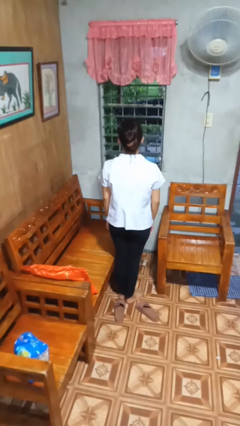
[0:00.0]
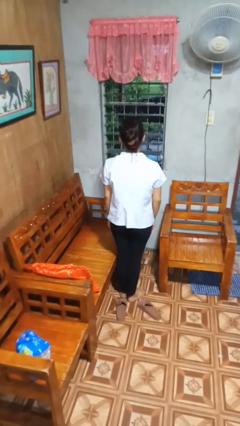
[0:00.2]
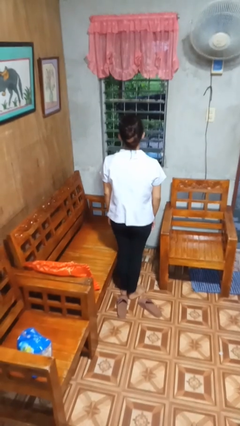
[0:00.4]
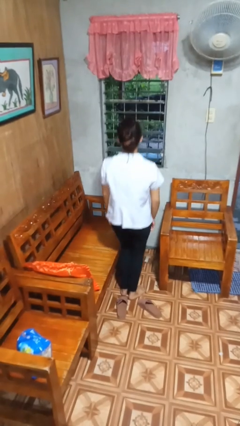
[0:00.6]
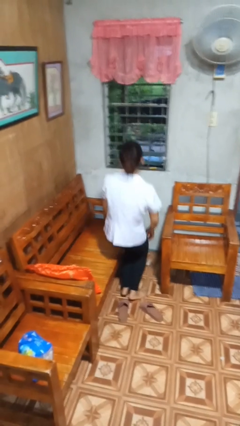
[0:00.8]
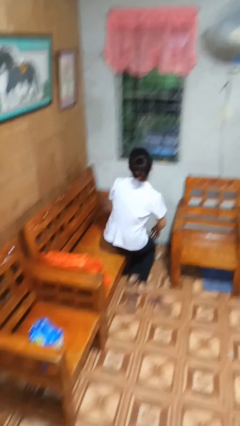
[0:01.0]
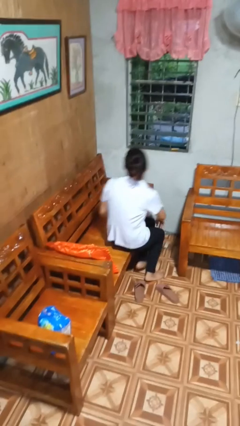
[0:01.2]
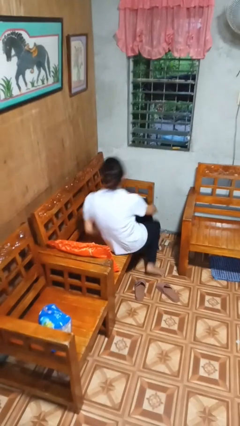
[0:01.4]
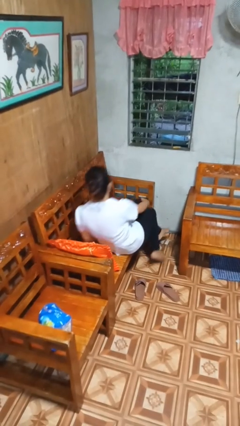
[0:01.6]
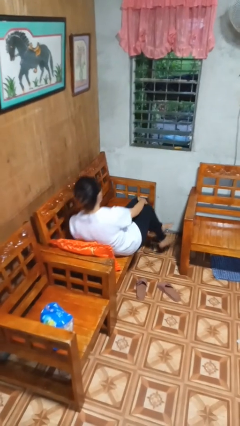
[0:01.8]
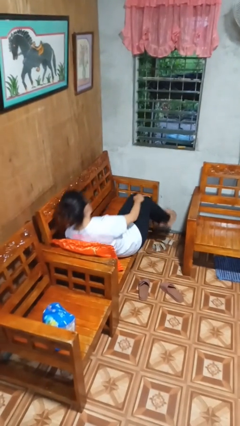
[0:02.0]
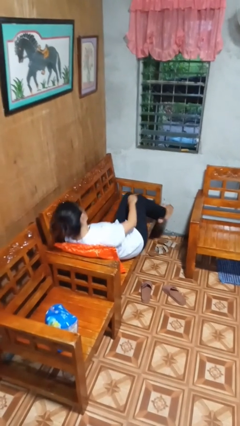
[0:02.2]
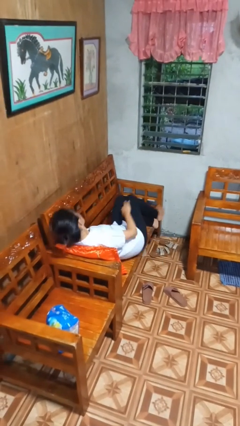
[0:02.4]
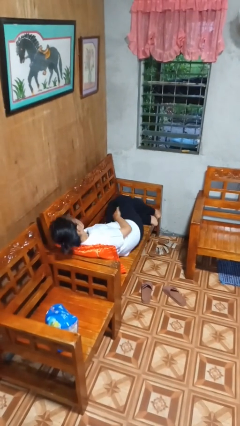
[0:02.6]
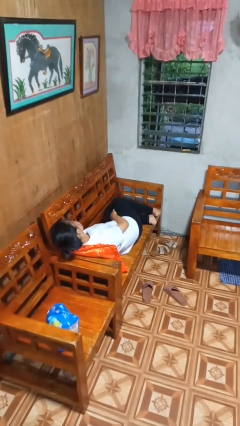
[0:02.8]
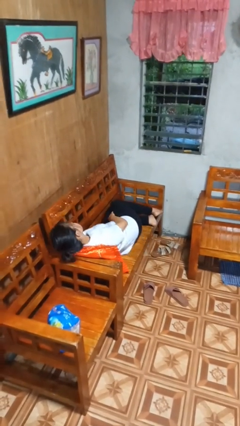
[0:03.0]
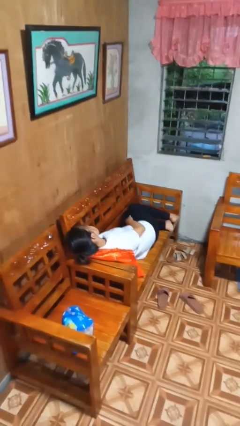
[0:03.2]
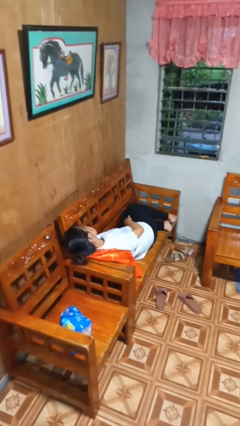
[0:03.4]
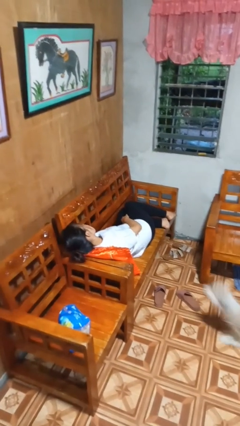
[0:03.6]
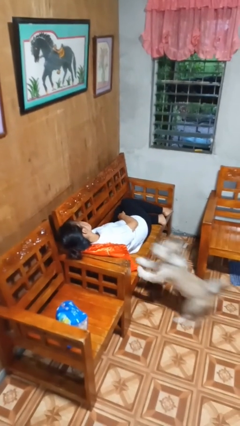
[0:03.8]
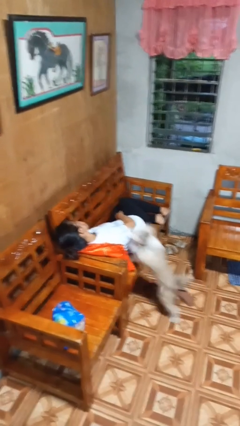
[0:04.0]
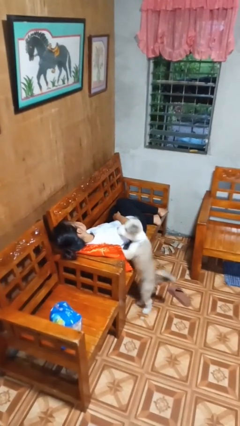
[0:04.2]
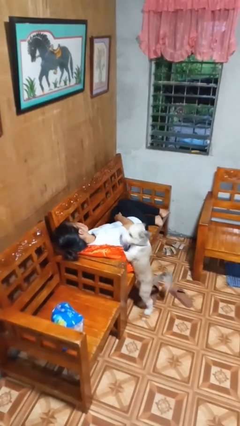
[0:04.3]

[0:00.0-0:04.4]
person lies down on couch

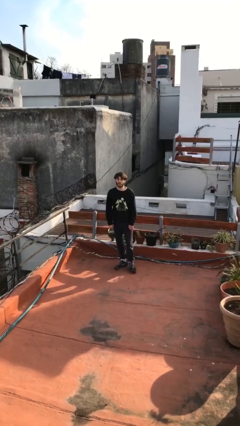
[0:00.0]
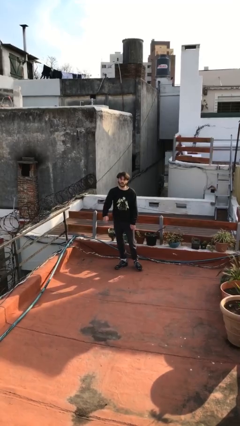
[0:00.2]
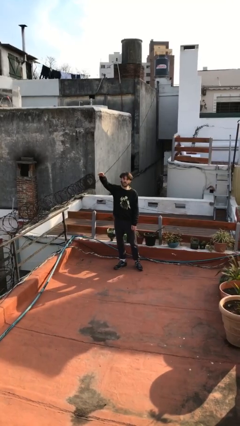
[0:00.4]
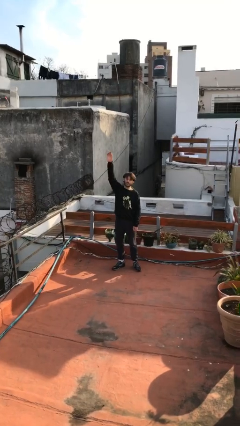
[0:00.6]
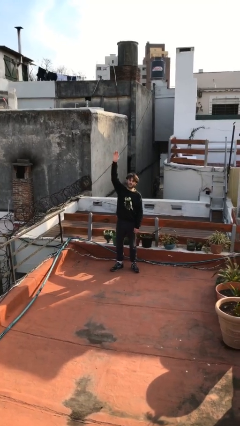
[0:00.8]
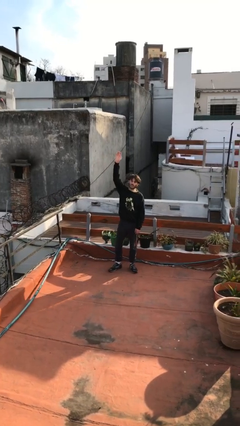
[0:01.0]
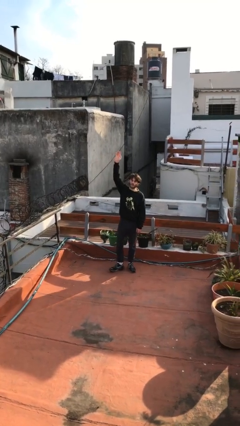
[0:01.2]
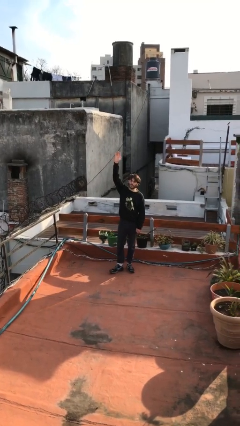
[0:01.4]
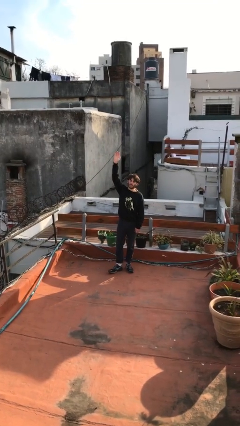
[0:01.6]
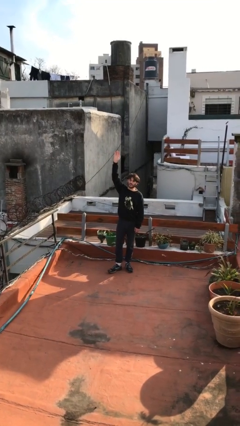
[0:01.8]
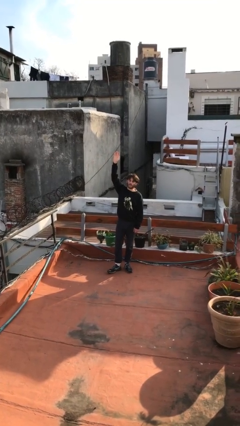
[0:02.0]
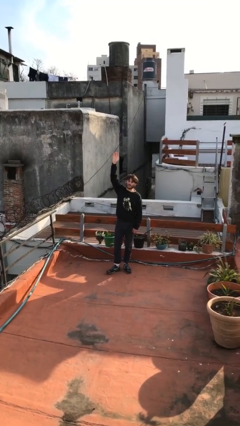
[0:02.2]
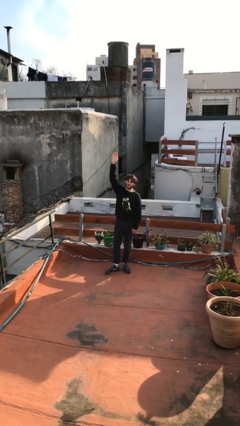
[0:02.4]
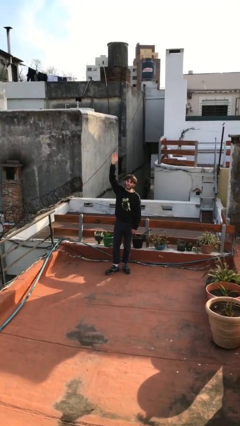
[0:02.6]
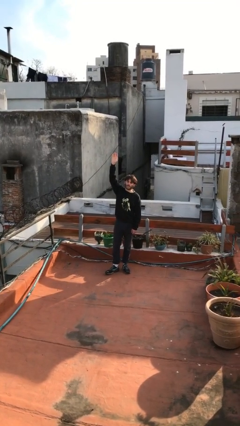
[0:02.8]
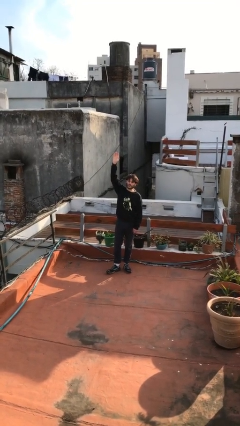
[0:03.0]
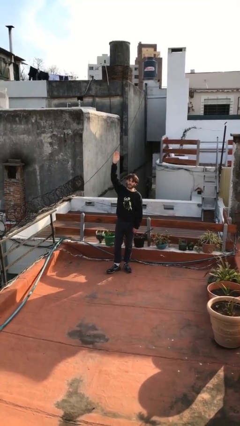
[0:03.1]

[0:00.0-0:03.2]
person gestures raise hand

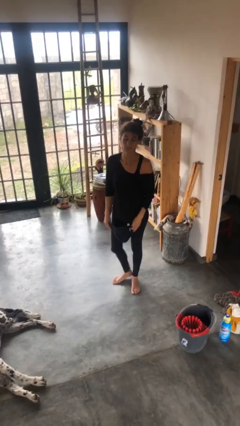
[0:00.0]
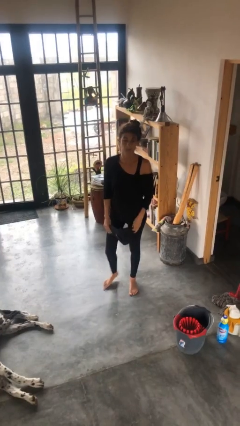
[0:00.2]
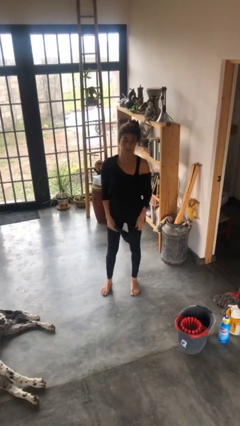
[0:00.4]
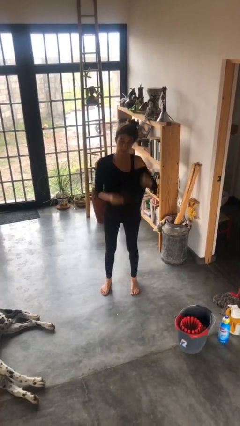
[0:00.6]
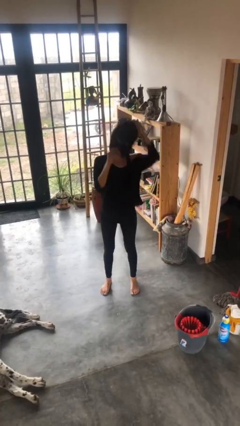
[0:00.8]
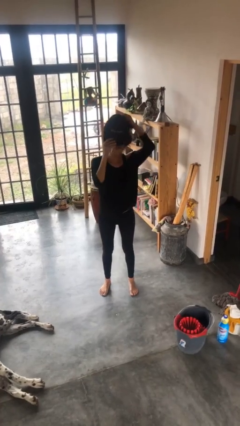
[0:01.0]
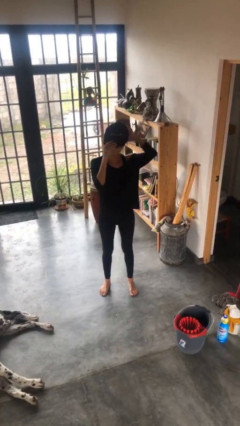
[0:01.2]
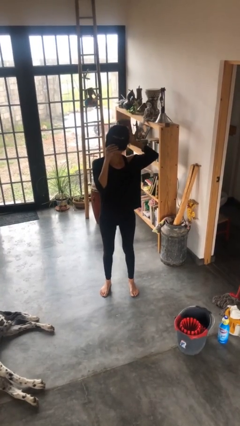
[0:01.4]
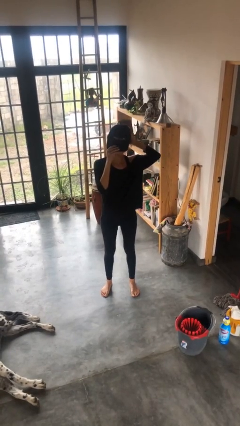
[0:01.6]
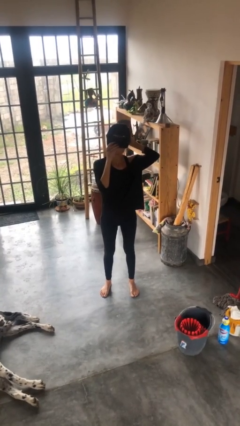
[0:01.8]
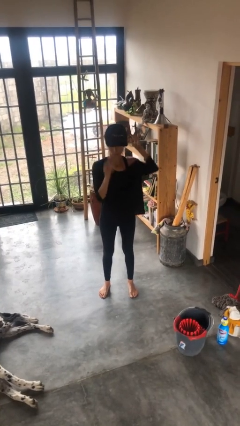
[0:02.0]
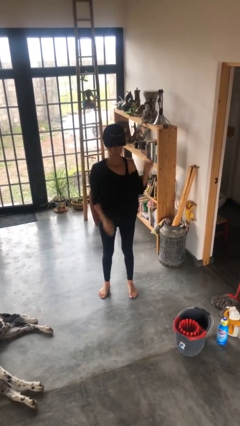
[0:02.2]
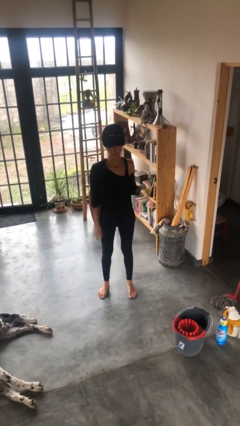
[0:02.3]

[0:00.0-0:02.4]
person puts on hat

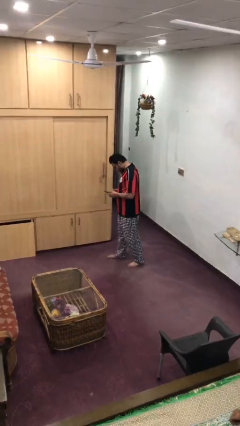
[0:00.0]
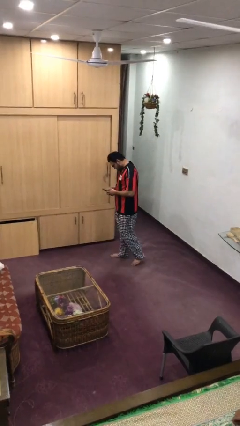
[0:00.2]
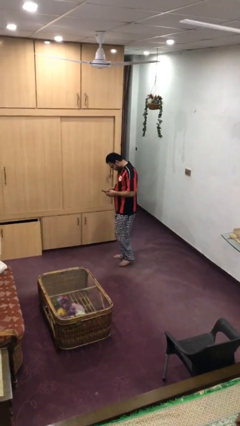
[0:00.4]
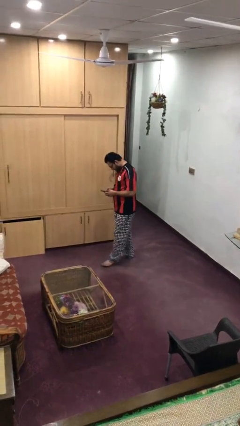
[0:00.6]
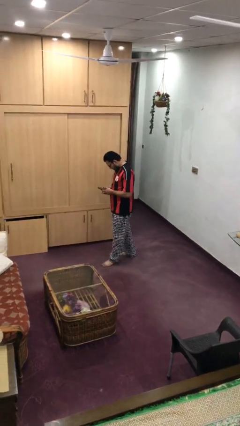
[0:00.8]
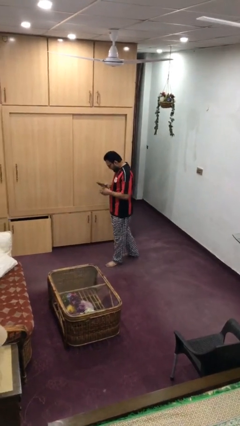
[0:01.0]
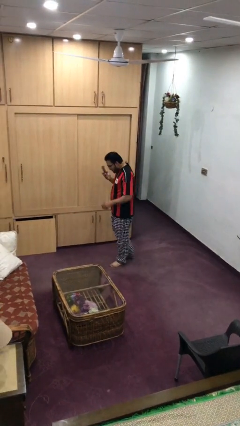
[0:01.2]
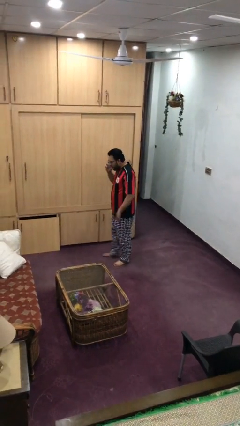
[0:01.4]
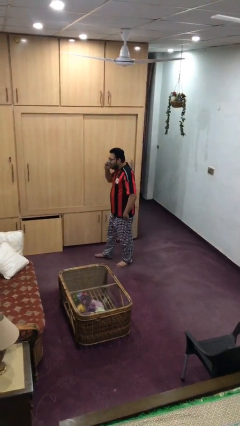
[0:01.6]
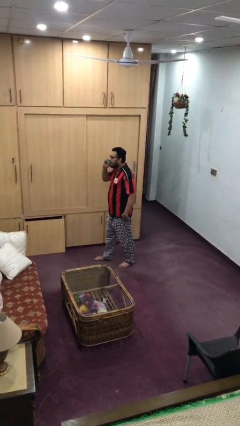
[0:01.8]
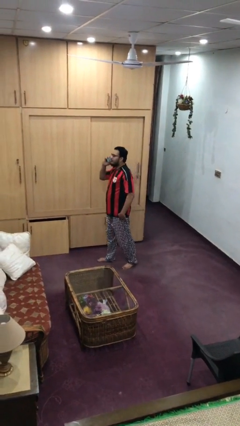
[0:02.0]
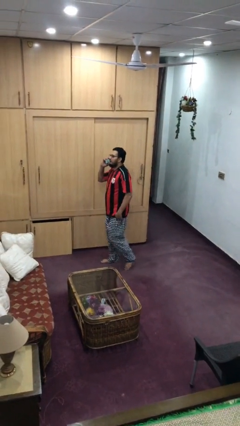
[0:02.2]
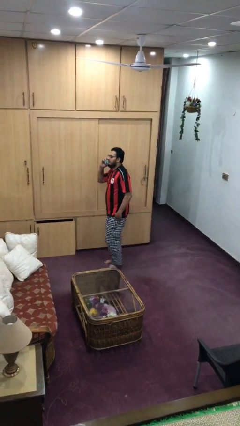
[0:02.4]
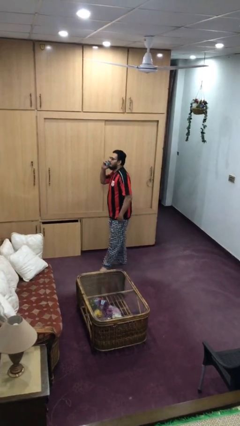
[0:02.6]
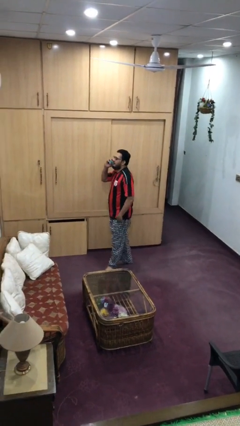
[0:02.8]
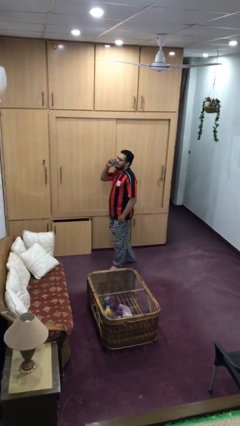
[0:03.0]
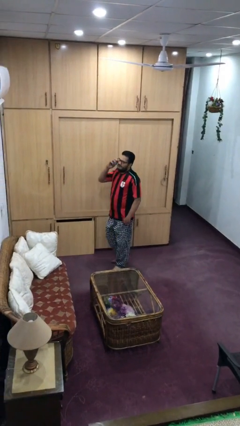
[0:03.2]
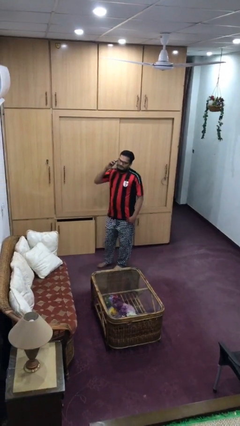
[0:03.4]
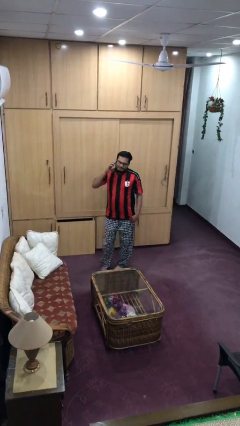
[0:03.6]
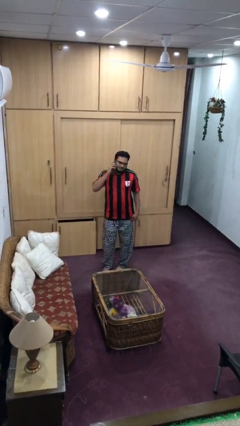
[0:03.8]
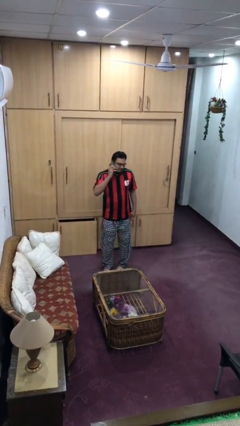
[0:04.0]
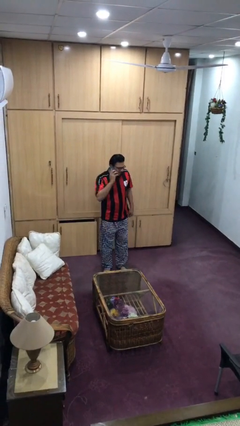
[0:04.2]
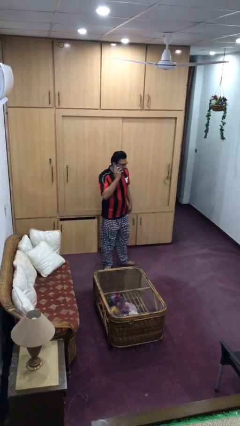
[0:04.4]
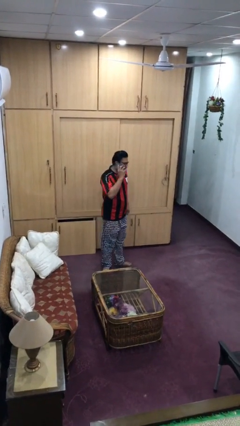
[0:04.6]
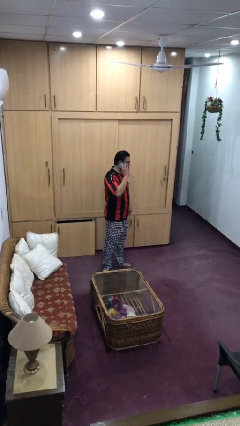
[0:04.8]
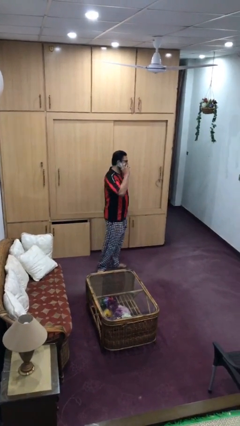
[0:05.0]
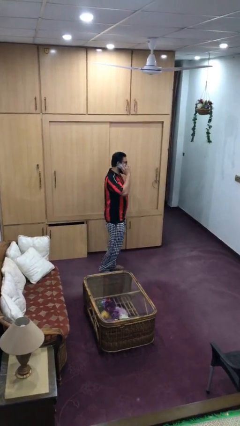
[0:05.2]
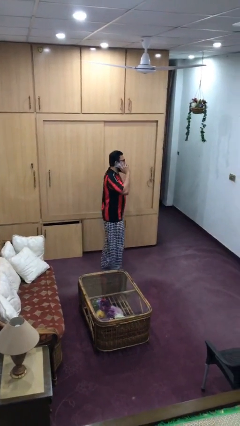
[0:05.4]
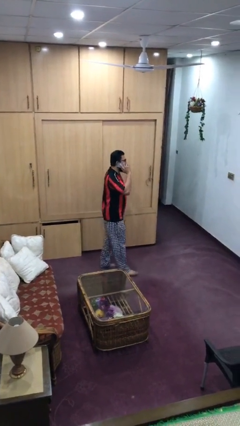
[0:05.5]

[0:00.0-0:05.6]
person talks on phone

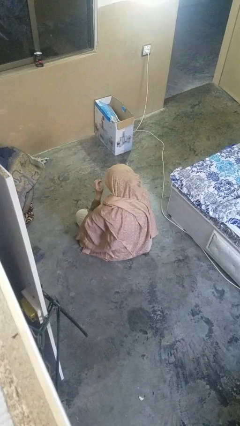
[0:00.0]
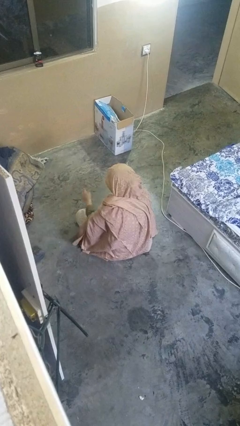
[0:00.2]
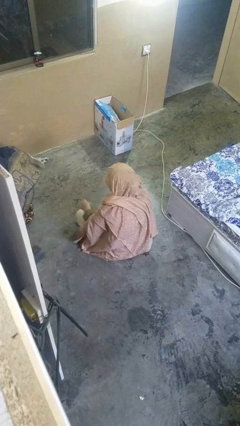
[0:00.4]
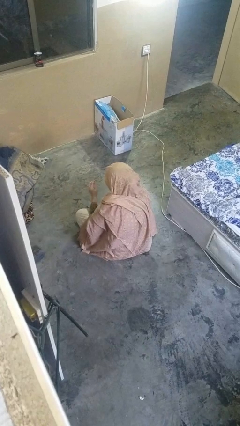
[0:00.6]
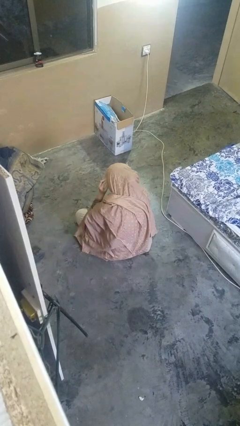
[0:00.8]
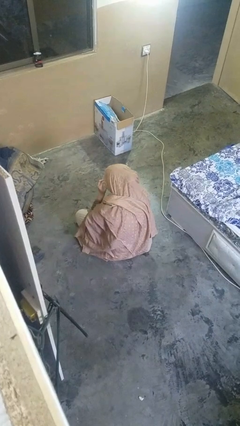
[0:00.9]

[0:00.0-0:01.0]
person takes off glasses

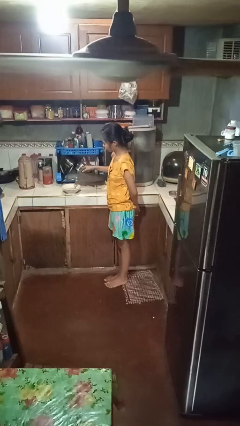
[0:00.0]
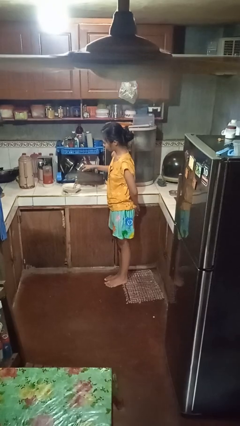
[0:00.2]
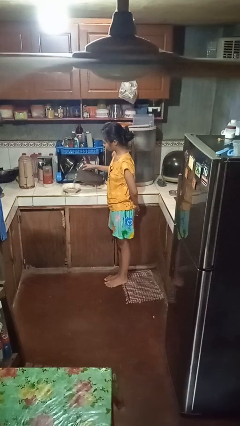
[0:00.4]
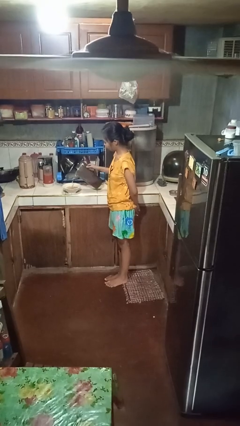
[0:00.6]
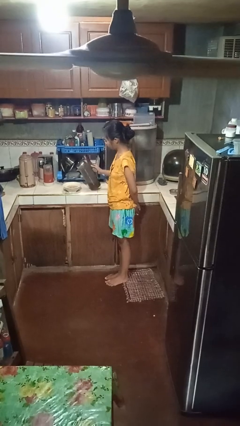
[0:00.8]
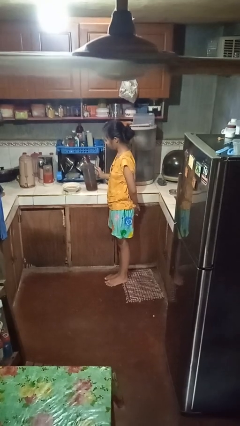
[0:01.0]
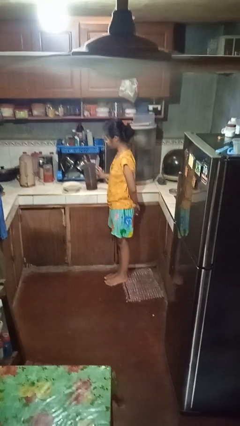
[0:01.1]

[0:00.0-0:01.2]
person pours into bowl

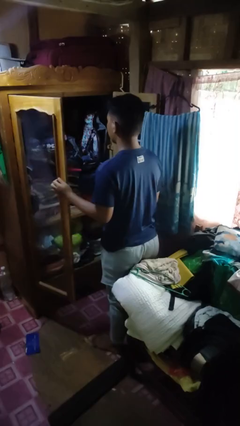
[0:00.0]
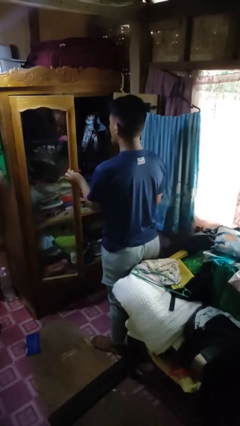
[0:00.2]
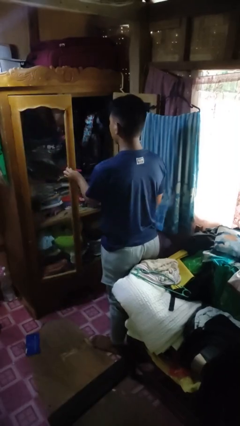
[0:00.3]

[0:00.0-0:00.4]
person closes closet door
